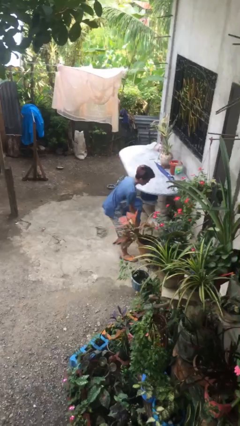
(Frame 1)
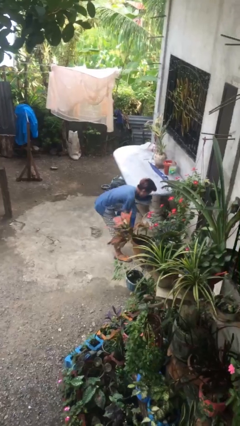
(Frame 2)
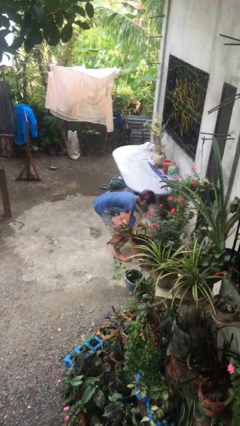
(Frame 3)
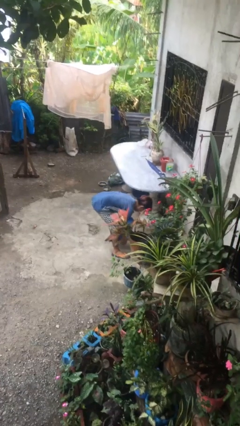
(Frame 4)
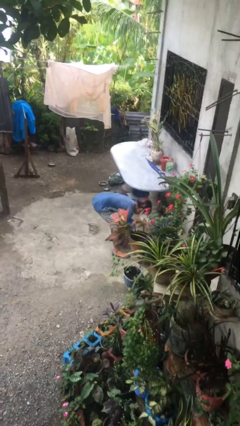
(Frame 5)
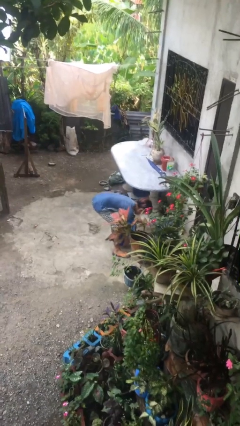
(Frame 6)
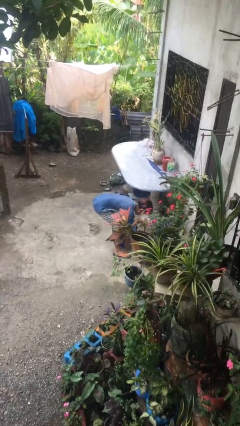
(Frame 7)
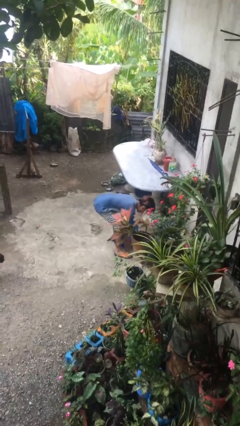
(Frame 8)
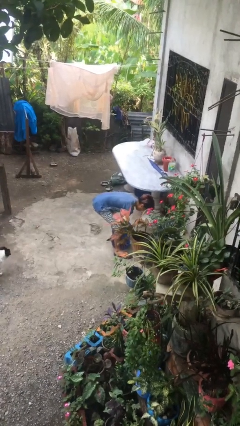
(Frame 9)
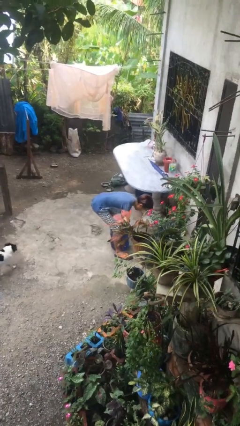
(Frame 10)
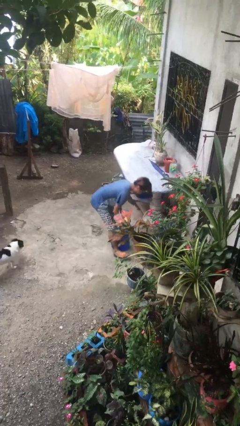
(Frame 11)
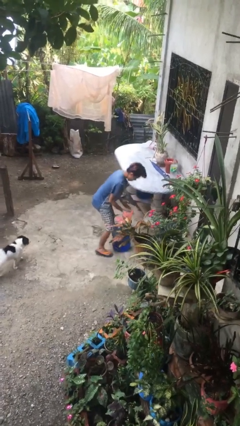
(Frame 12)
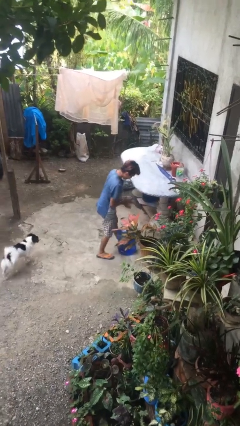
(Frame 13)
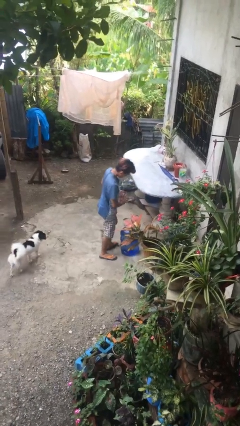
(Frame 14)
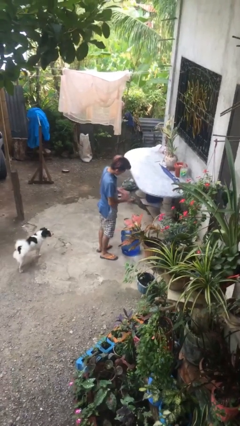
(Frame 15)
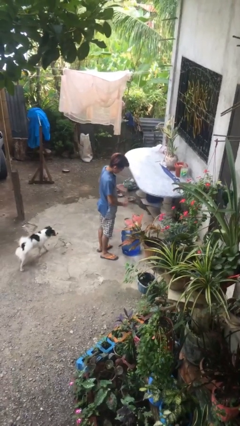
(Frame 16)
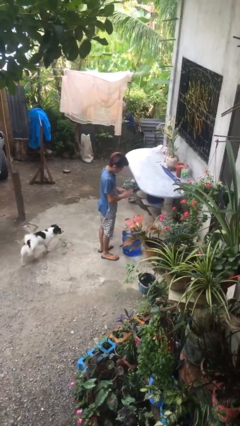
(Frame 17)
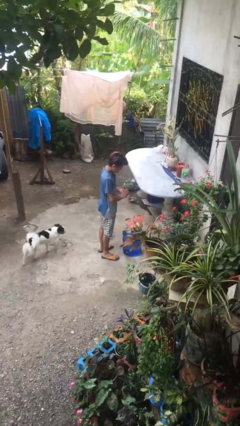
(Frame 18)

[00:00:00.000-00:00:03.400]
person puts down object on floor

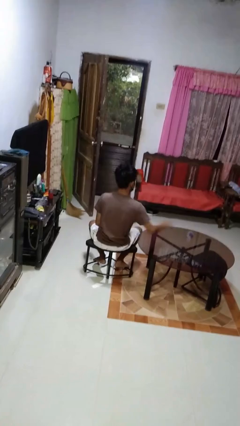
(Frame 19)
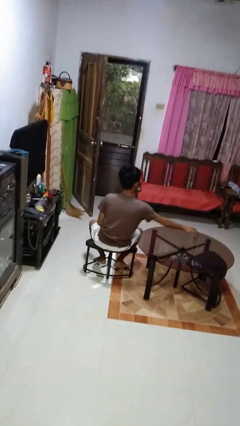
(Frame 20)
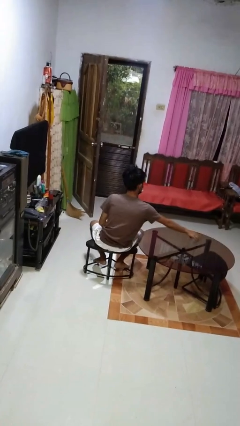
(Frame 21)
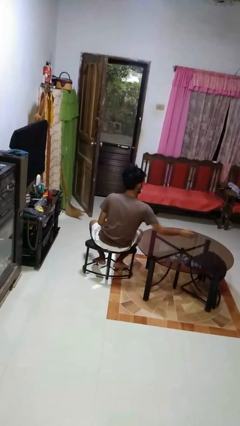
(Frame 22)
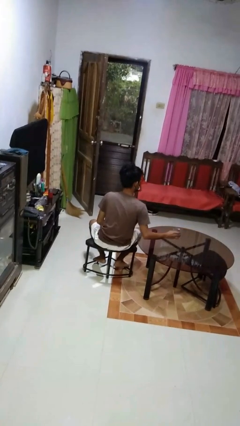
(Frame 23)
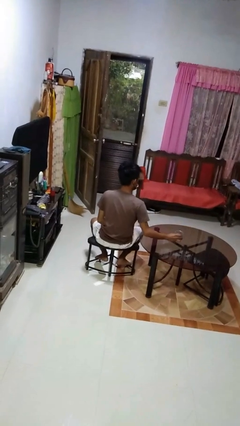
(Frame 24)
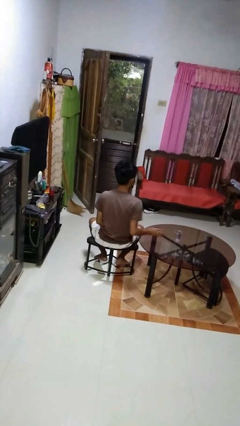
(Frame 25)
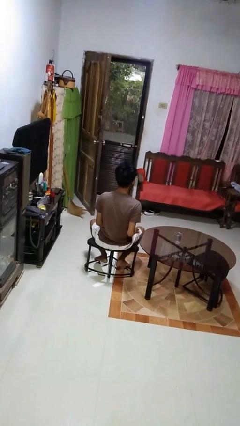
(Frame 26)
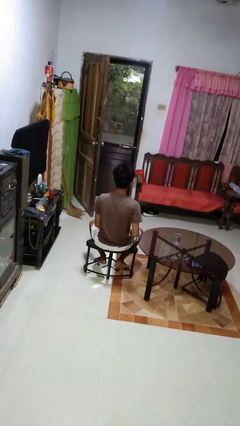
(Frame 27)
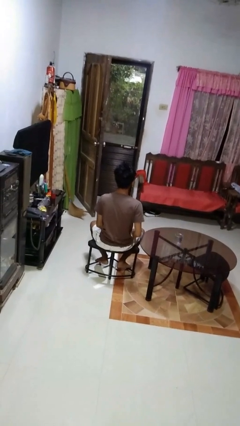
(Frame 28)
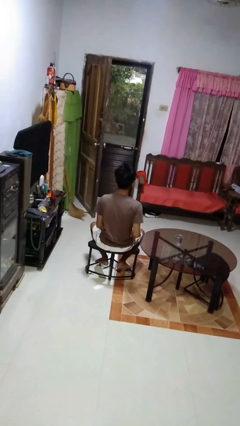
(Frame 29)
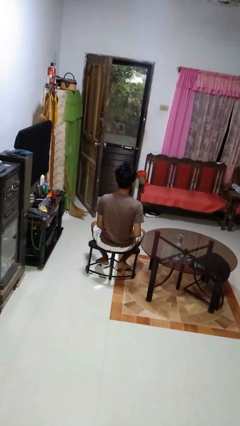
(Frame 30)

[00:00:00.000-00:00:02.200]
person sets upright glass

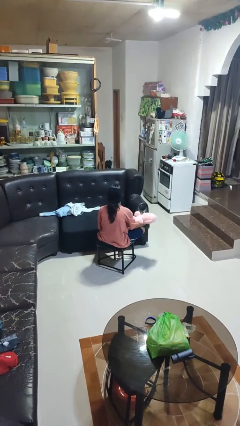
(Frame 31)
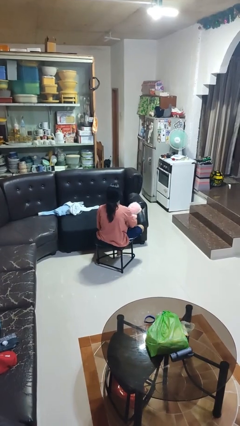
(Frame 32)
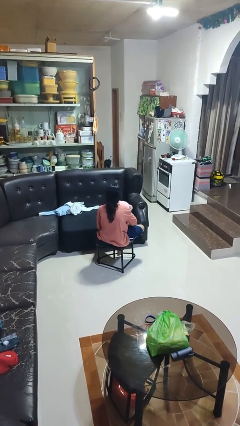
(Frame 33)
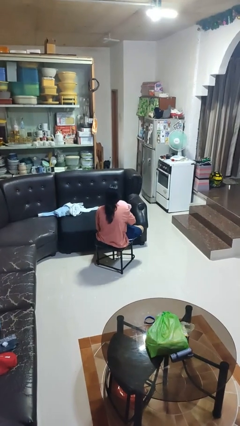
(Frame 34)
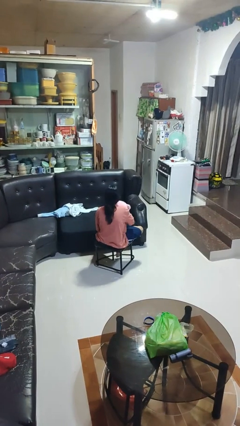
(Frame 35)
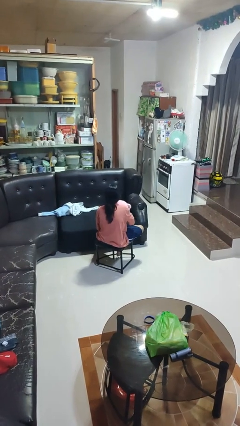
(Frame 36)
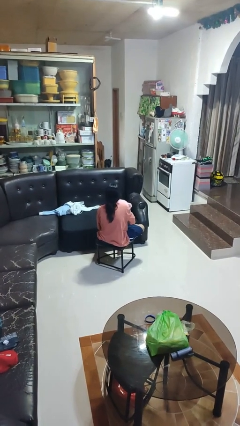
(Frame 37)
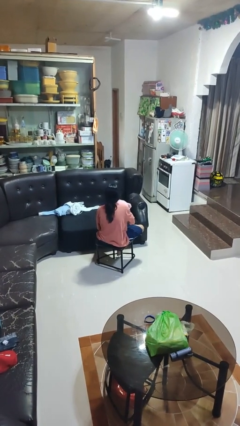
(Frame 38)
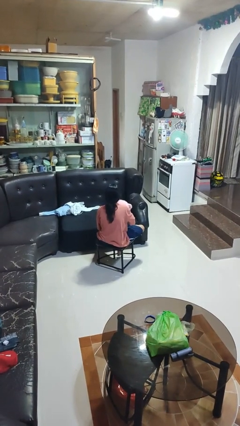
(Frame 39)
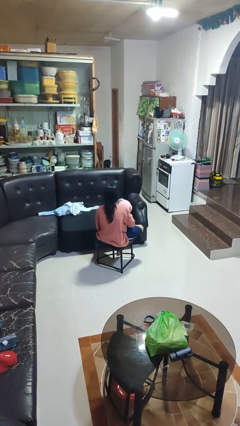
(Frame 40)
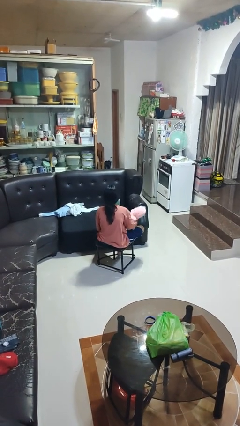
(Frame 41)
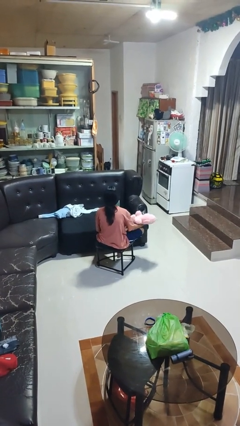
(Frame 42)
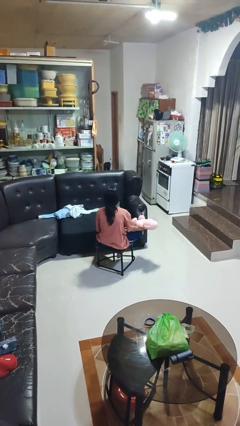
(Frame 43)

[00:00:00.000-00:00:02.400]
person hugs stuffed animal

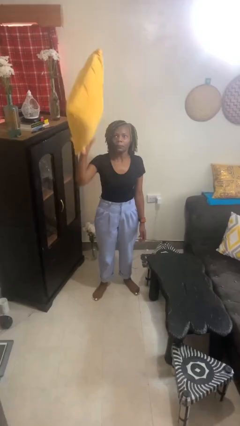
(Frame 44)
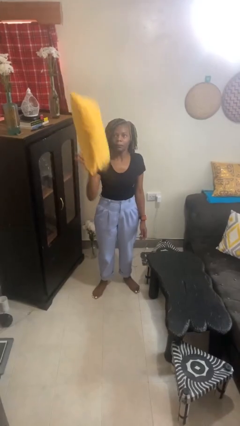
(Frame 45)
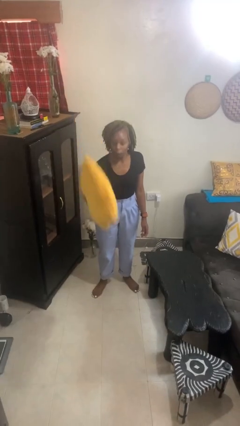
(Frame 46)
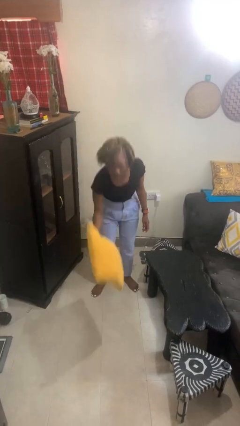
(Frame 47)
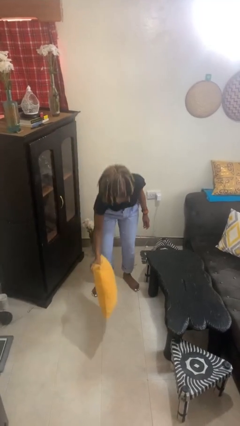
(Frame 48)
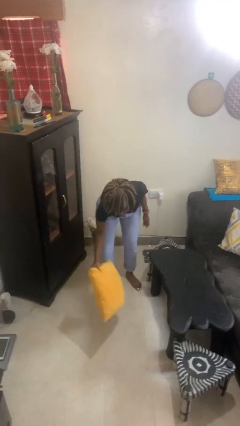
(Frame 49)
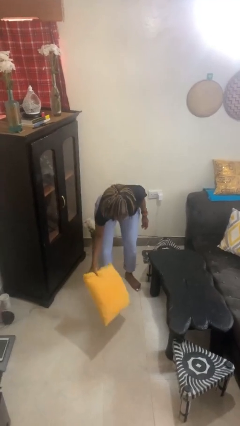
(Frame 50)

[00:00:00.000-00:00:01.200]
person drops object

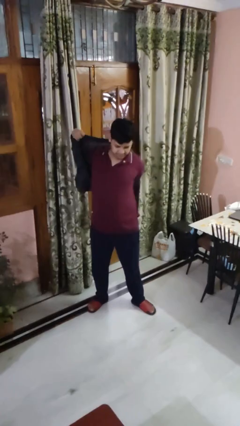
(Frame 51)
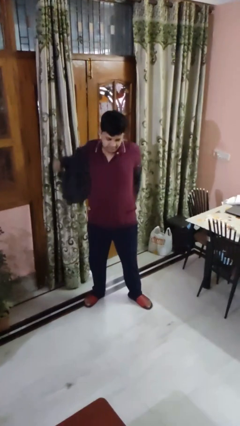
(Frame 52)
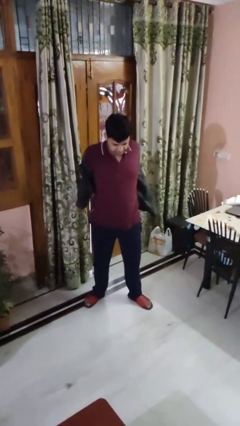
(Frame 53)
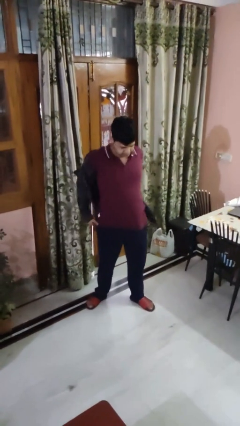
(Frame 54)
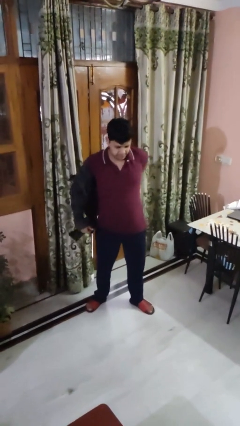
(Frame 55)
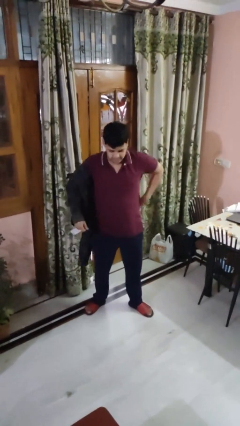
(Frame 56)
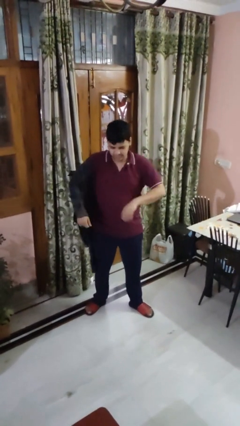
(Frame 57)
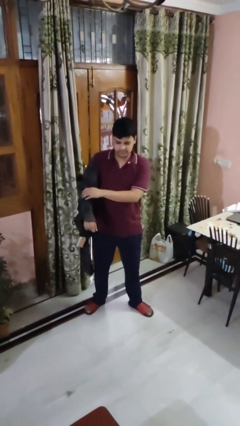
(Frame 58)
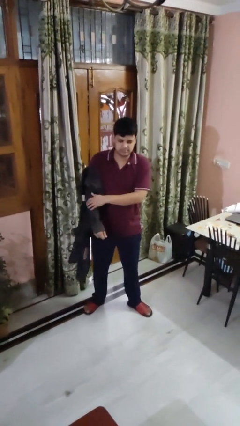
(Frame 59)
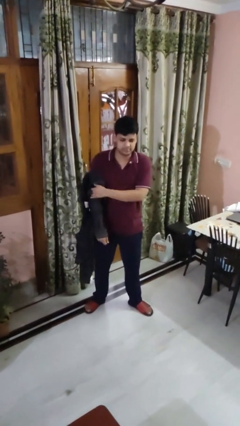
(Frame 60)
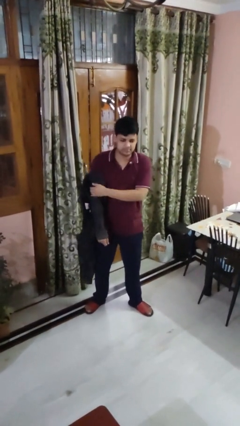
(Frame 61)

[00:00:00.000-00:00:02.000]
person takes off shirt

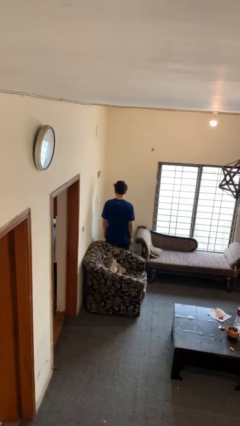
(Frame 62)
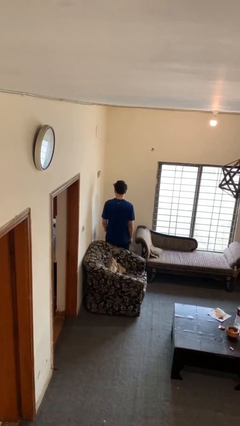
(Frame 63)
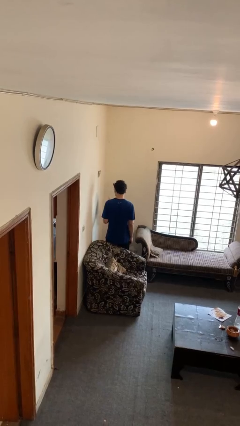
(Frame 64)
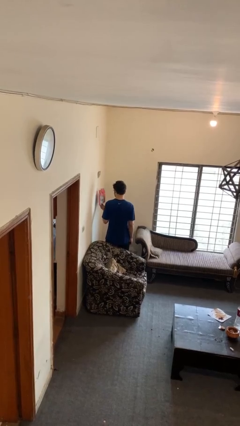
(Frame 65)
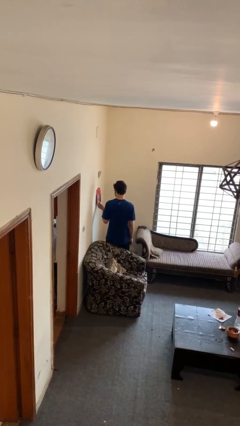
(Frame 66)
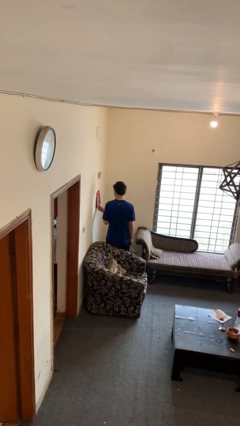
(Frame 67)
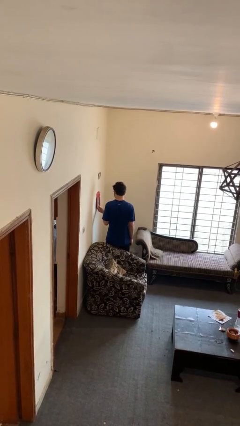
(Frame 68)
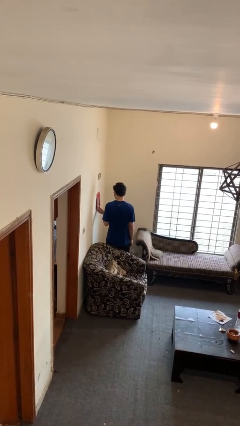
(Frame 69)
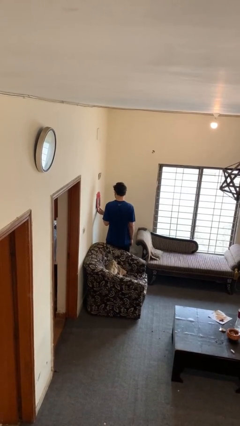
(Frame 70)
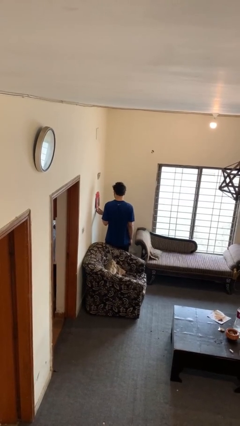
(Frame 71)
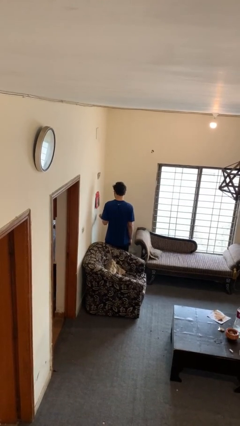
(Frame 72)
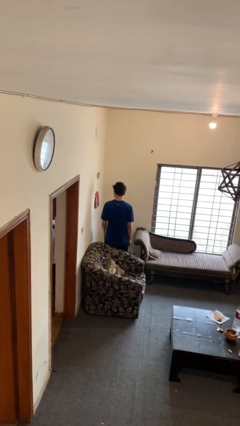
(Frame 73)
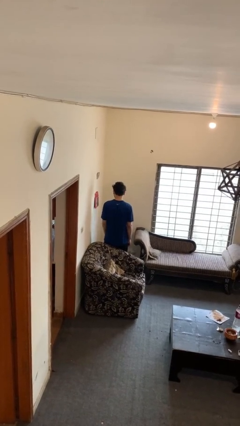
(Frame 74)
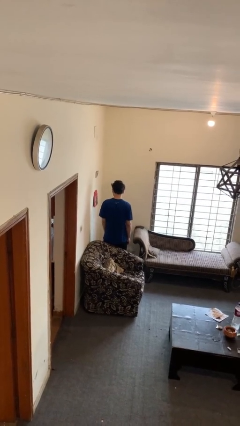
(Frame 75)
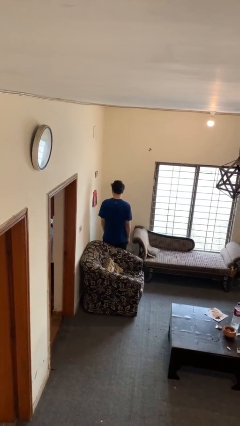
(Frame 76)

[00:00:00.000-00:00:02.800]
person puts up picture frame

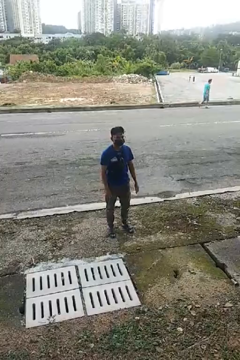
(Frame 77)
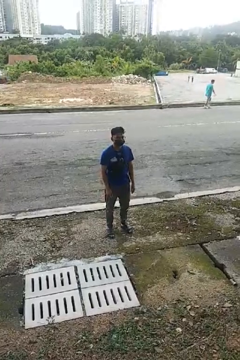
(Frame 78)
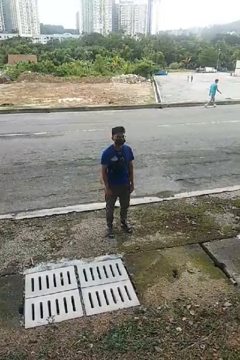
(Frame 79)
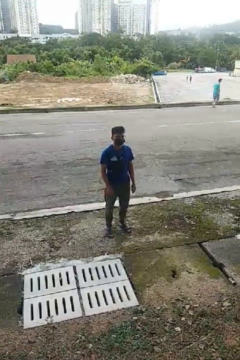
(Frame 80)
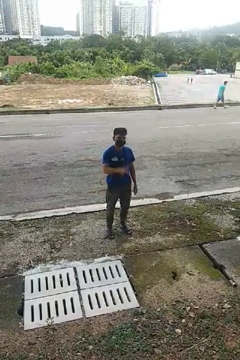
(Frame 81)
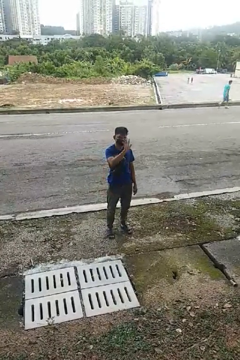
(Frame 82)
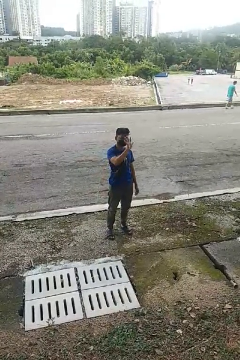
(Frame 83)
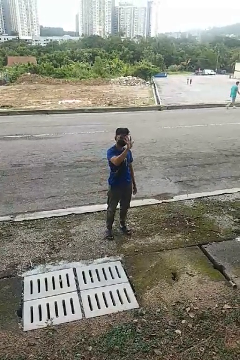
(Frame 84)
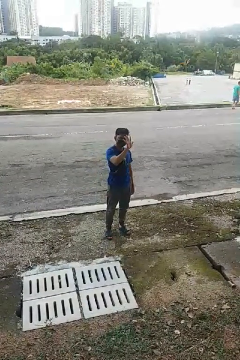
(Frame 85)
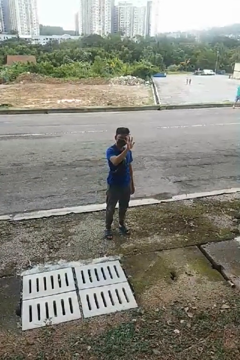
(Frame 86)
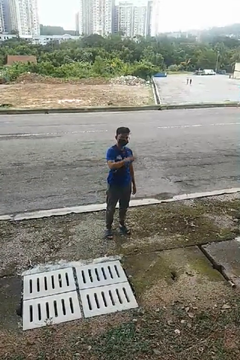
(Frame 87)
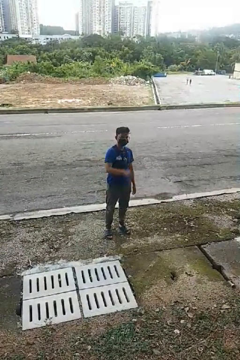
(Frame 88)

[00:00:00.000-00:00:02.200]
person gestures stop

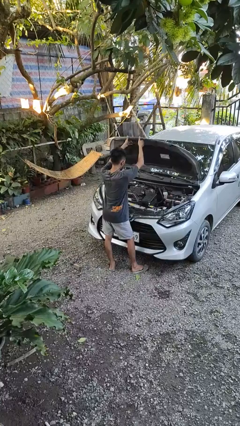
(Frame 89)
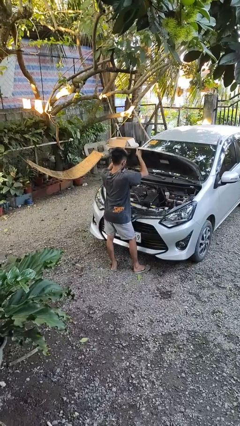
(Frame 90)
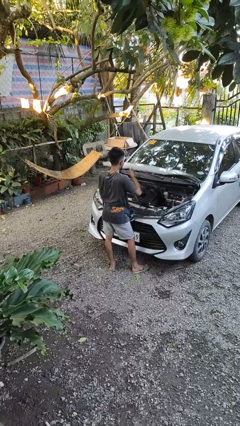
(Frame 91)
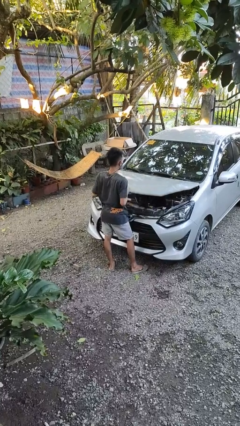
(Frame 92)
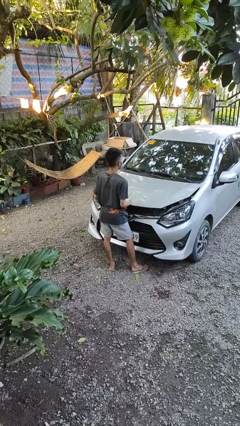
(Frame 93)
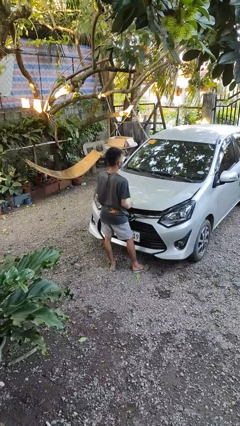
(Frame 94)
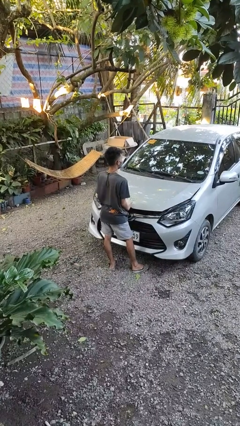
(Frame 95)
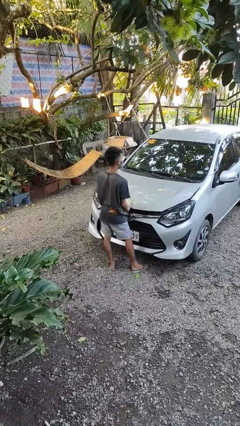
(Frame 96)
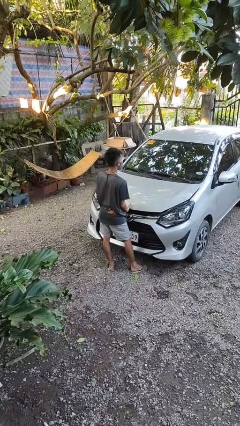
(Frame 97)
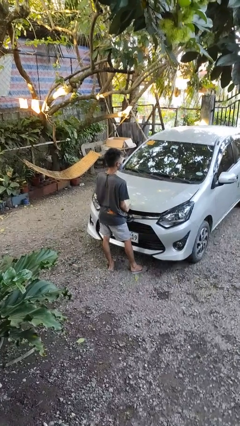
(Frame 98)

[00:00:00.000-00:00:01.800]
person closes car hood
